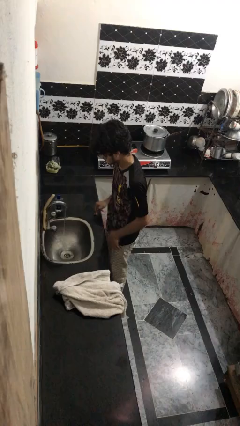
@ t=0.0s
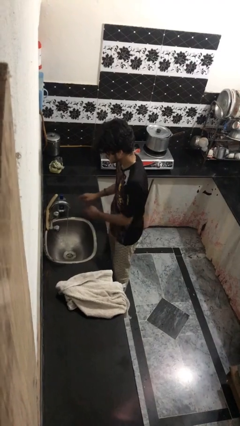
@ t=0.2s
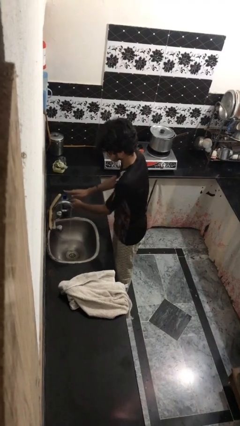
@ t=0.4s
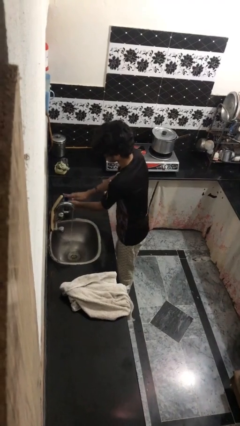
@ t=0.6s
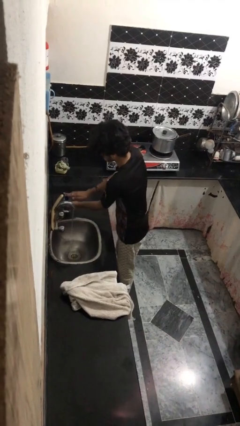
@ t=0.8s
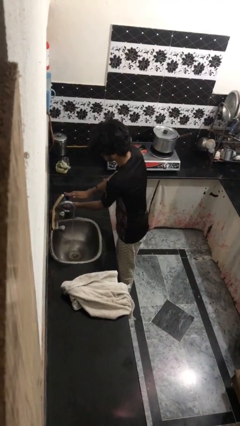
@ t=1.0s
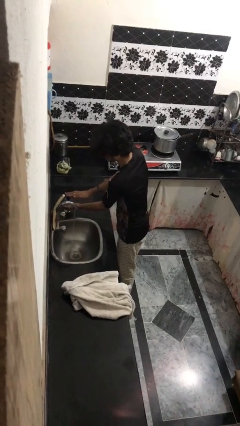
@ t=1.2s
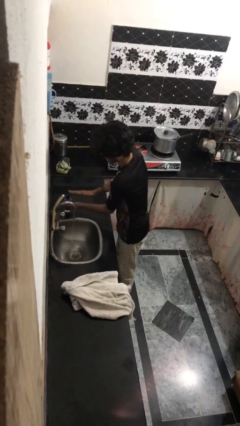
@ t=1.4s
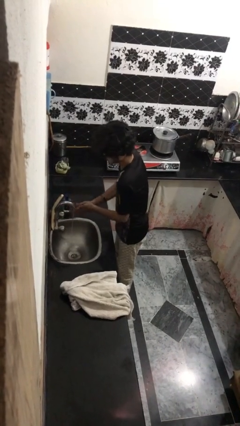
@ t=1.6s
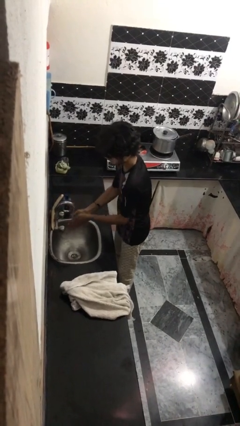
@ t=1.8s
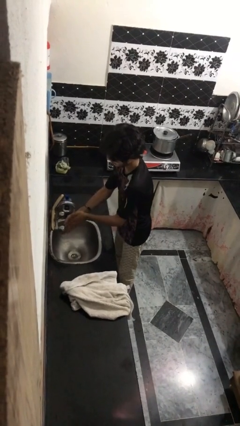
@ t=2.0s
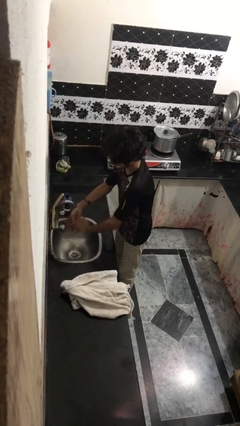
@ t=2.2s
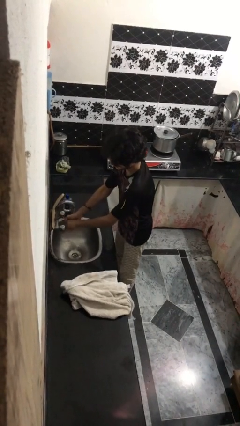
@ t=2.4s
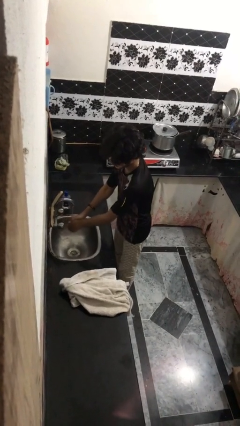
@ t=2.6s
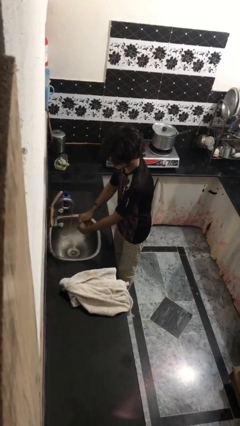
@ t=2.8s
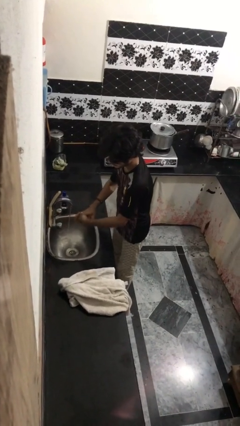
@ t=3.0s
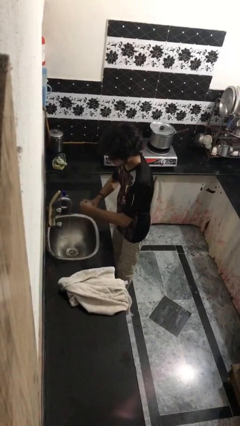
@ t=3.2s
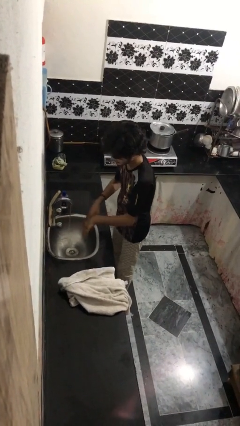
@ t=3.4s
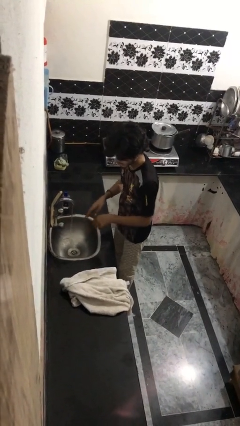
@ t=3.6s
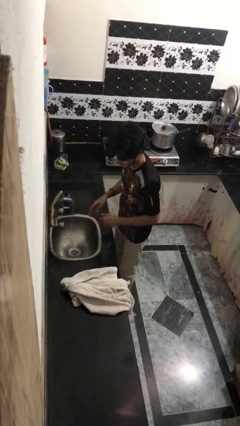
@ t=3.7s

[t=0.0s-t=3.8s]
person washes hands

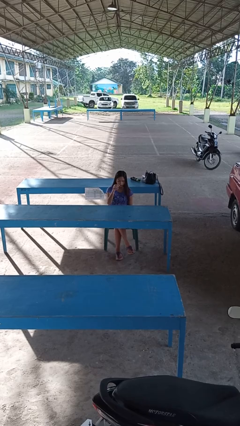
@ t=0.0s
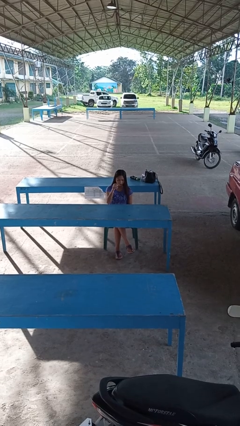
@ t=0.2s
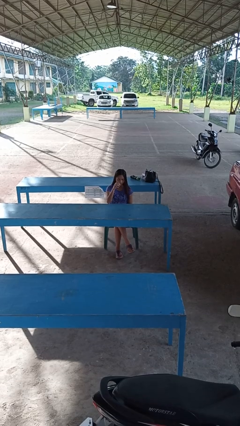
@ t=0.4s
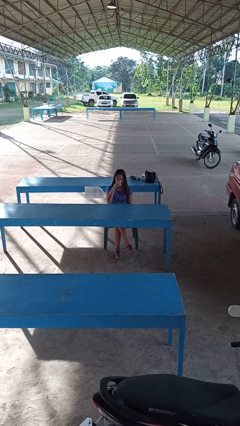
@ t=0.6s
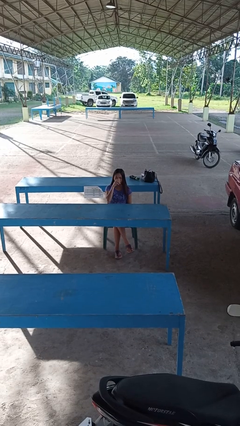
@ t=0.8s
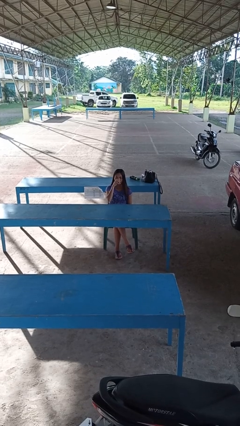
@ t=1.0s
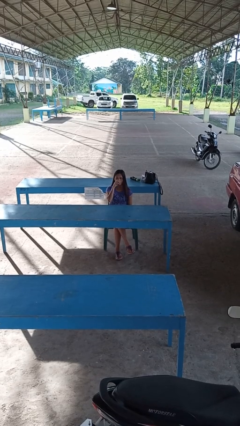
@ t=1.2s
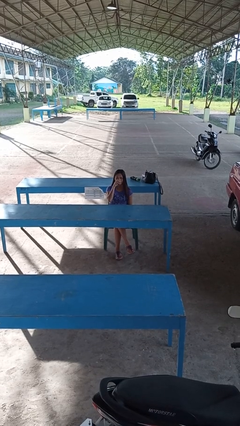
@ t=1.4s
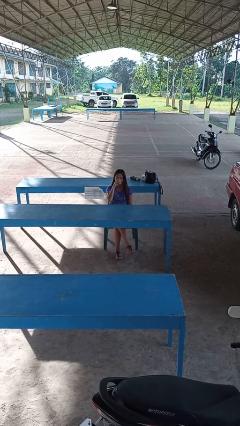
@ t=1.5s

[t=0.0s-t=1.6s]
person drinks from shotglass

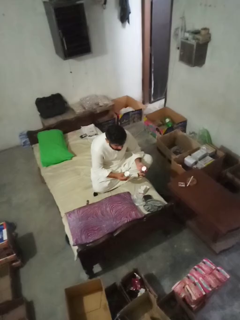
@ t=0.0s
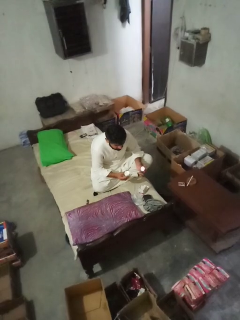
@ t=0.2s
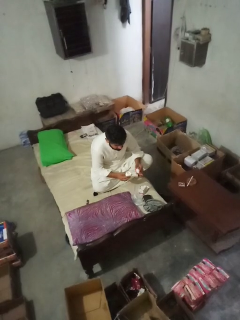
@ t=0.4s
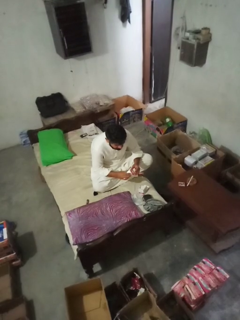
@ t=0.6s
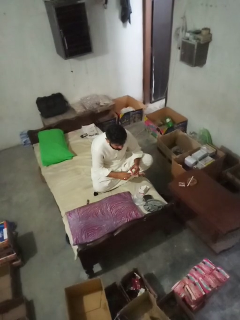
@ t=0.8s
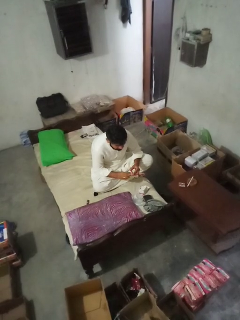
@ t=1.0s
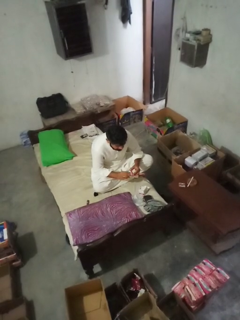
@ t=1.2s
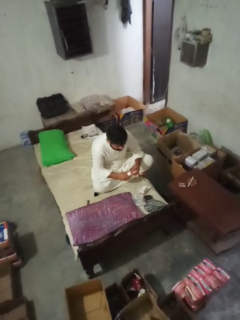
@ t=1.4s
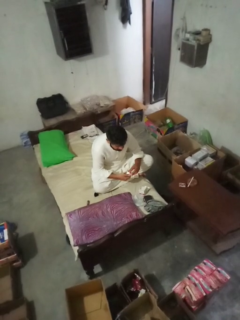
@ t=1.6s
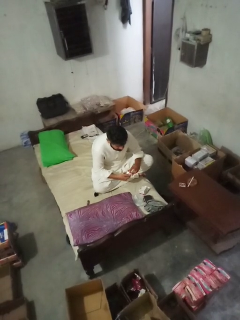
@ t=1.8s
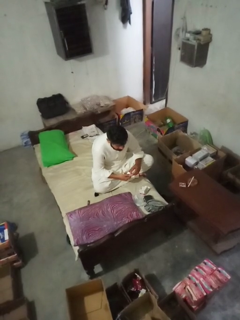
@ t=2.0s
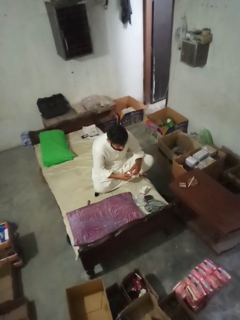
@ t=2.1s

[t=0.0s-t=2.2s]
person closes jar

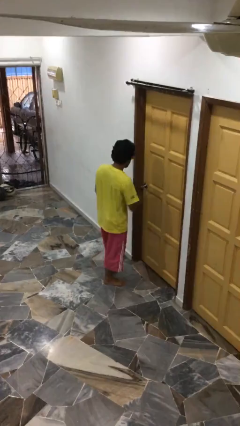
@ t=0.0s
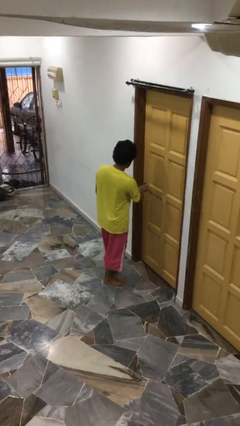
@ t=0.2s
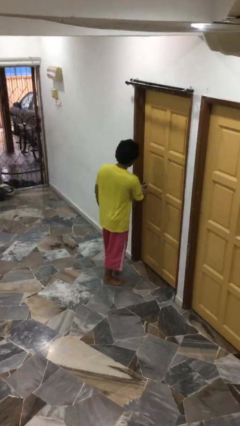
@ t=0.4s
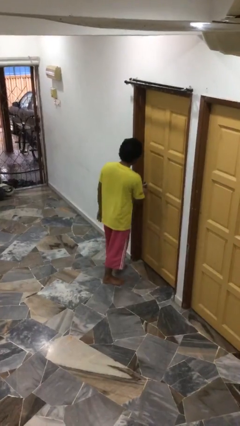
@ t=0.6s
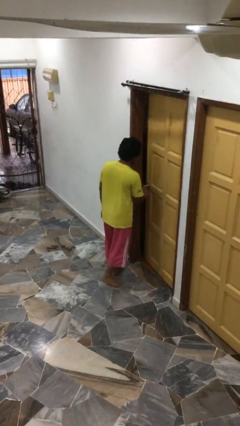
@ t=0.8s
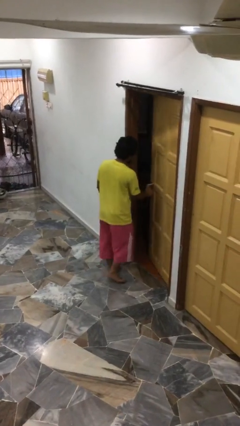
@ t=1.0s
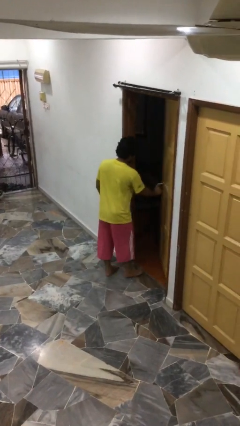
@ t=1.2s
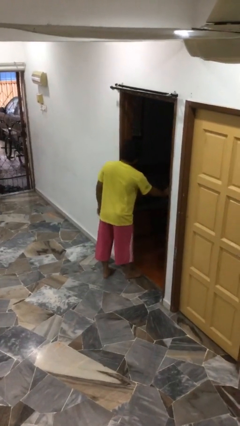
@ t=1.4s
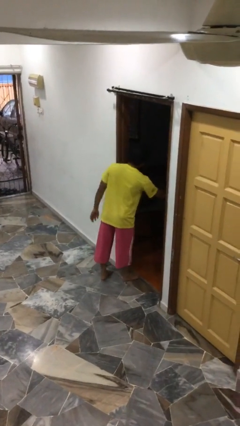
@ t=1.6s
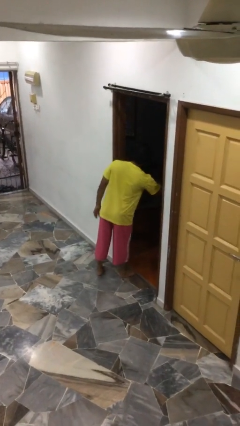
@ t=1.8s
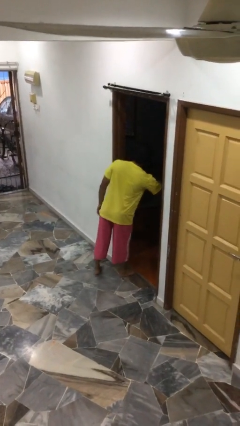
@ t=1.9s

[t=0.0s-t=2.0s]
person opens facility door

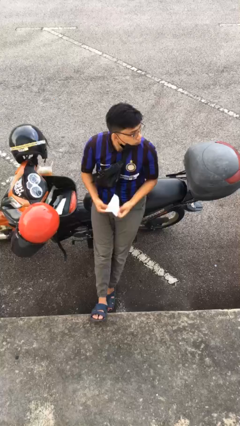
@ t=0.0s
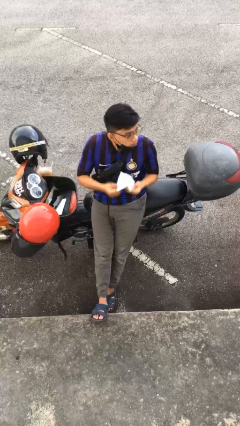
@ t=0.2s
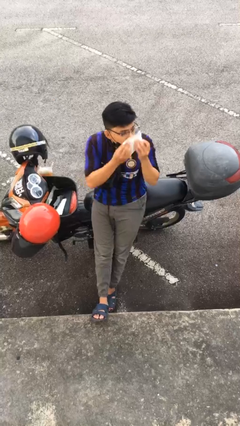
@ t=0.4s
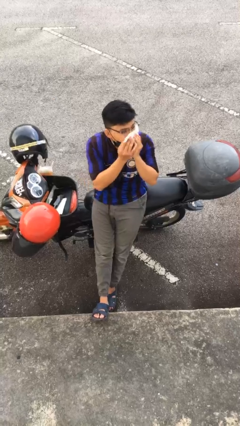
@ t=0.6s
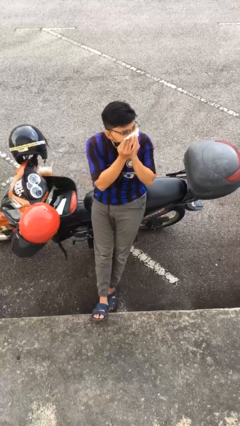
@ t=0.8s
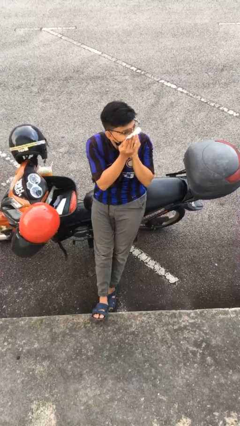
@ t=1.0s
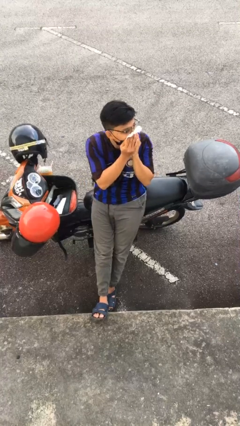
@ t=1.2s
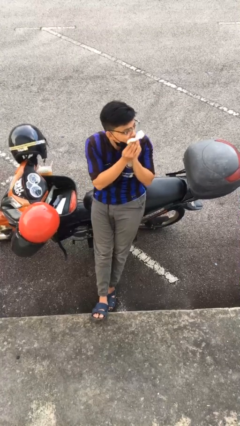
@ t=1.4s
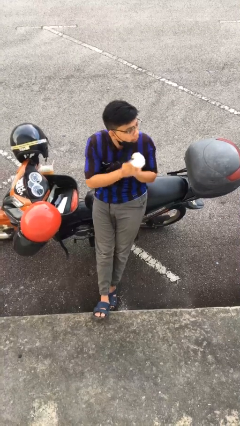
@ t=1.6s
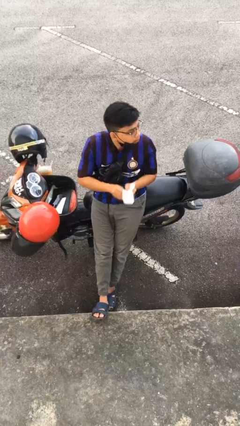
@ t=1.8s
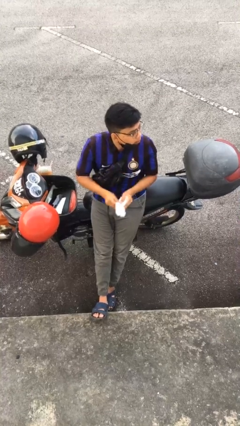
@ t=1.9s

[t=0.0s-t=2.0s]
person blows nose

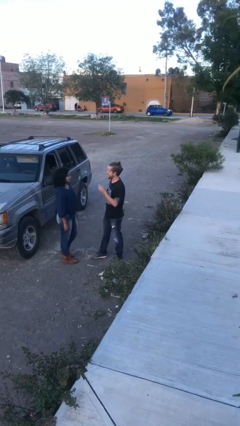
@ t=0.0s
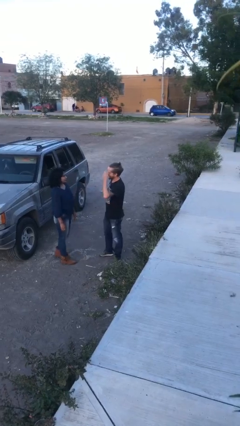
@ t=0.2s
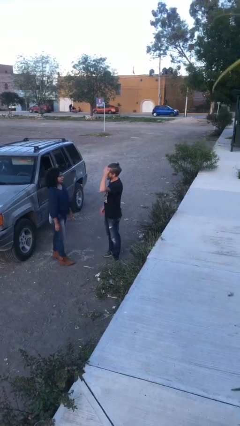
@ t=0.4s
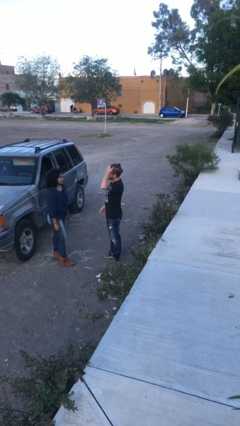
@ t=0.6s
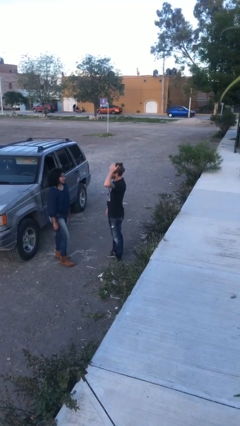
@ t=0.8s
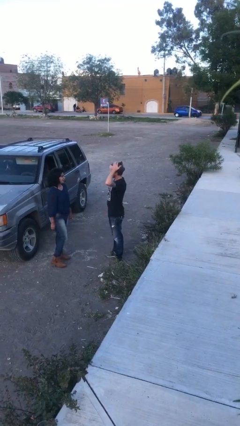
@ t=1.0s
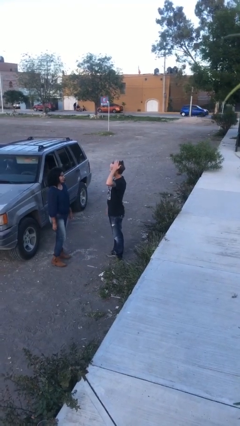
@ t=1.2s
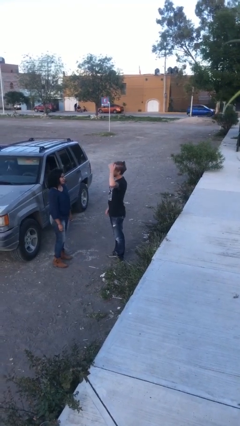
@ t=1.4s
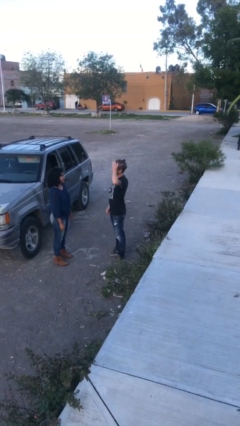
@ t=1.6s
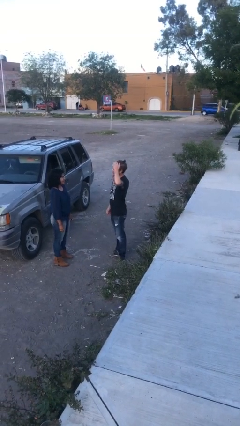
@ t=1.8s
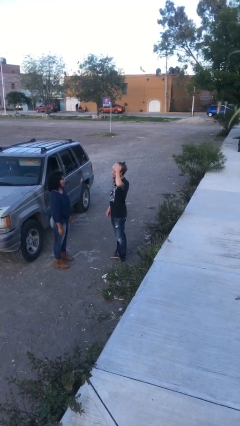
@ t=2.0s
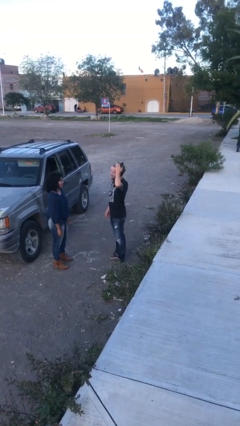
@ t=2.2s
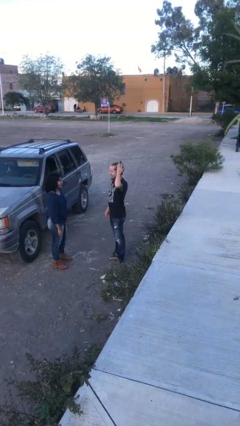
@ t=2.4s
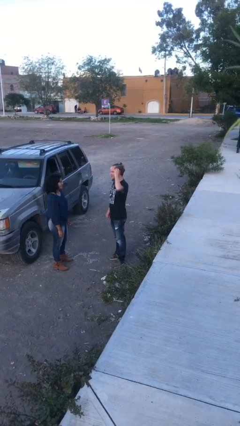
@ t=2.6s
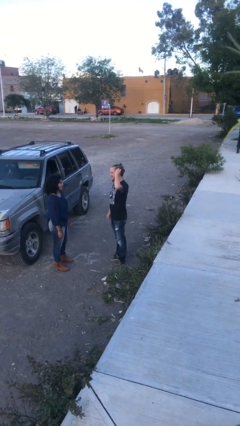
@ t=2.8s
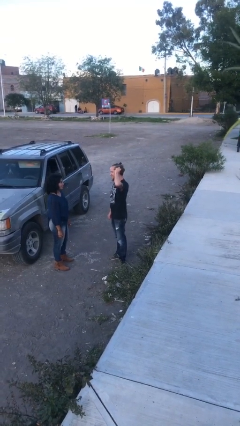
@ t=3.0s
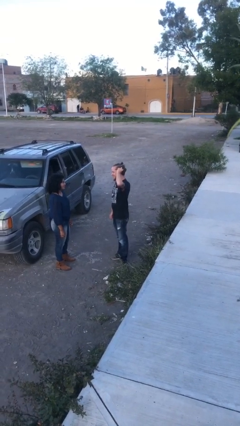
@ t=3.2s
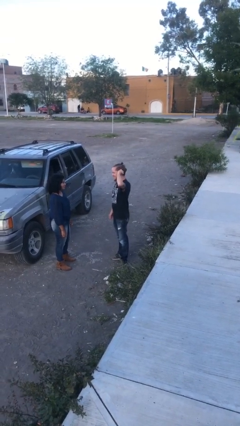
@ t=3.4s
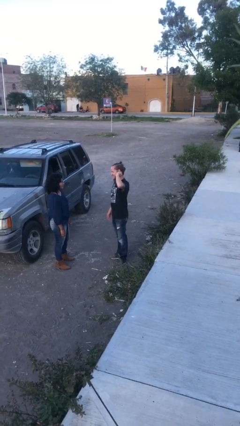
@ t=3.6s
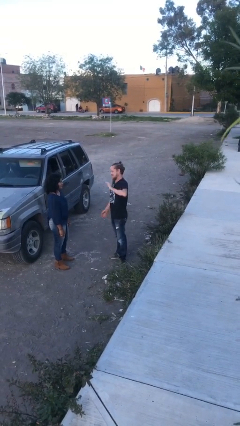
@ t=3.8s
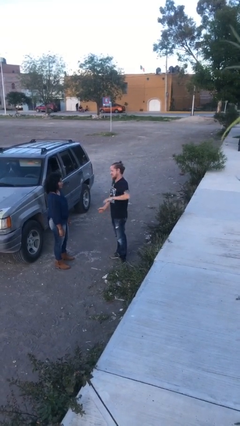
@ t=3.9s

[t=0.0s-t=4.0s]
person talks to person

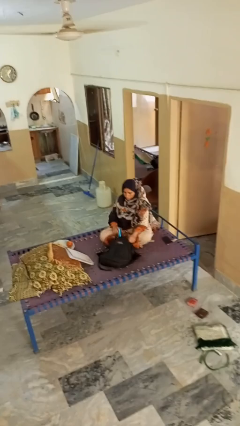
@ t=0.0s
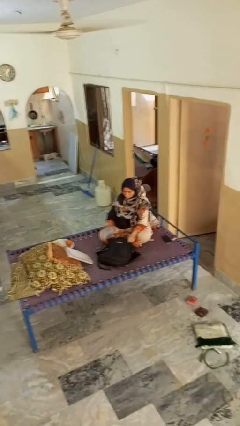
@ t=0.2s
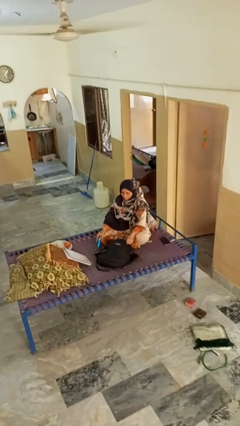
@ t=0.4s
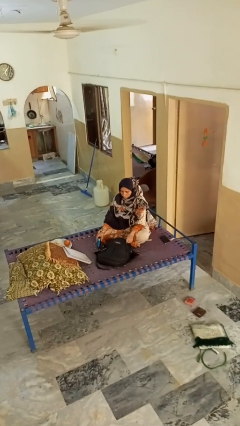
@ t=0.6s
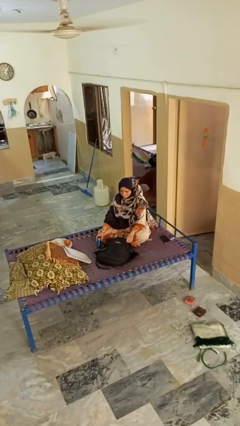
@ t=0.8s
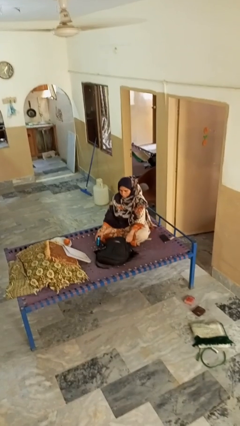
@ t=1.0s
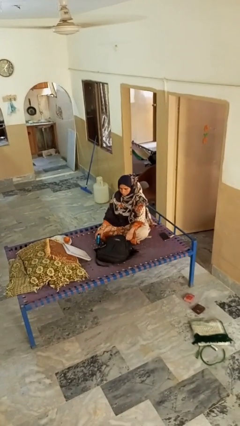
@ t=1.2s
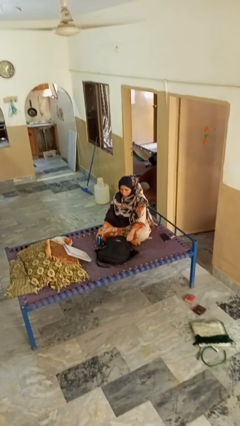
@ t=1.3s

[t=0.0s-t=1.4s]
person takes object from bag

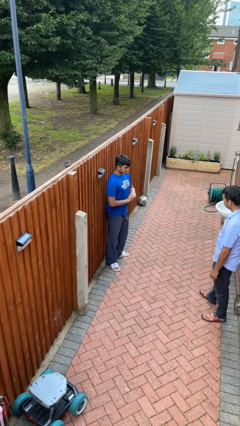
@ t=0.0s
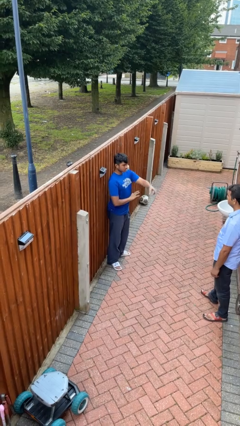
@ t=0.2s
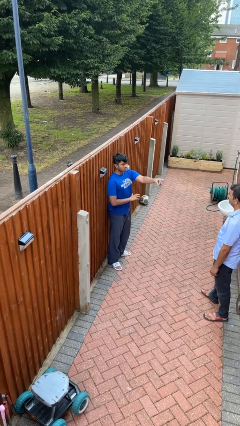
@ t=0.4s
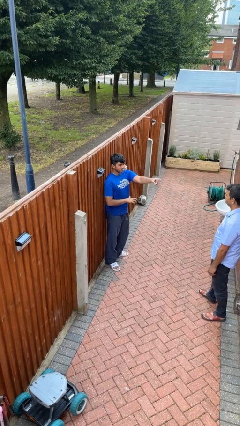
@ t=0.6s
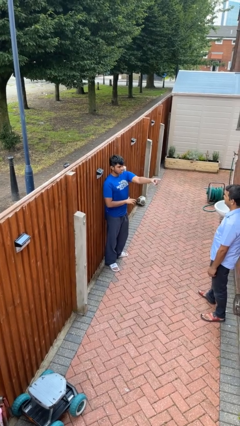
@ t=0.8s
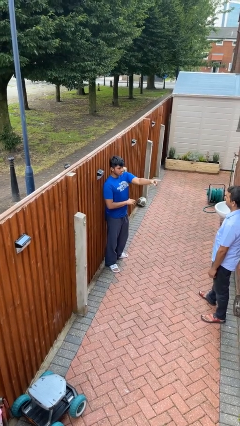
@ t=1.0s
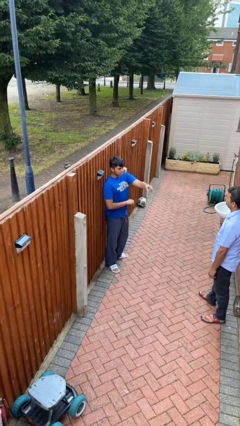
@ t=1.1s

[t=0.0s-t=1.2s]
person points at person
